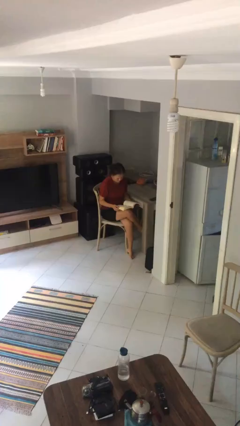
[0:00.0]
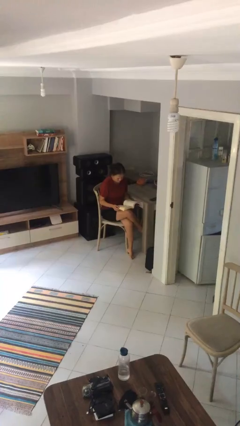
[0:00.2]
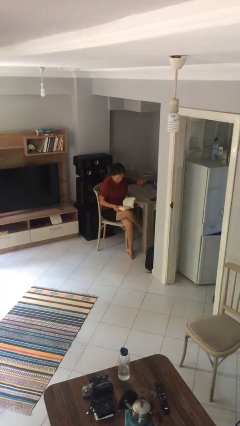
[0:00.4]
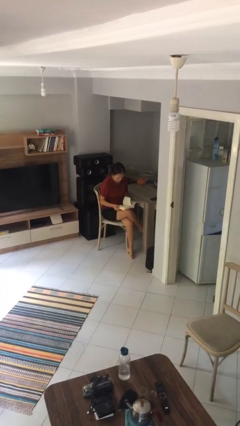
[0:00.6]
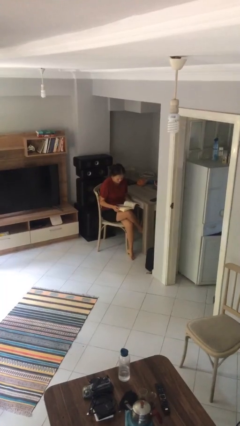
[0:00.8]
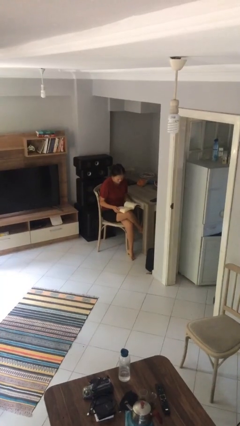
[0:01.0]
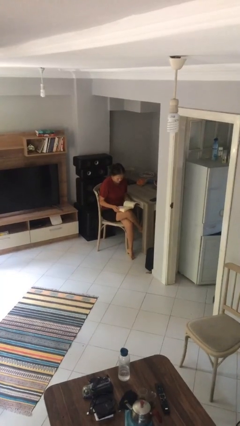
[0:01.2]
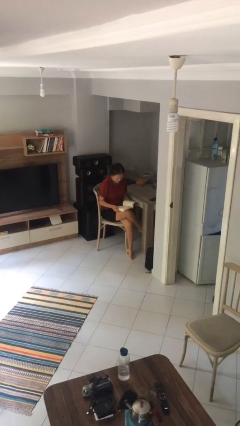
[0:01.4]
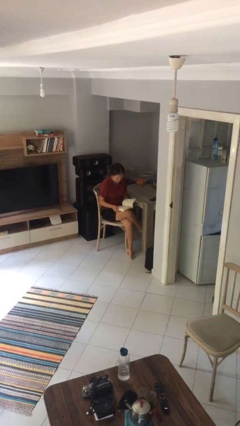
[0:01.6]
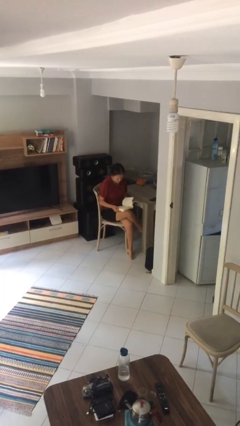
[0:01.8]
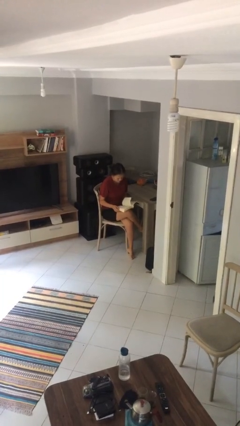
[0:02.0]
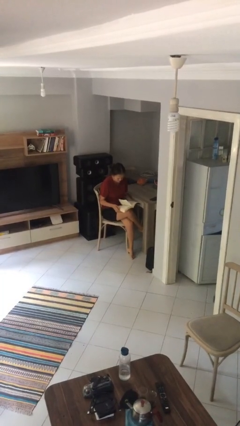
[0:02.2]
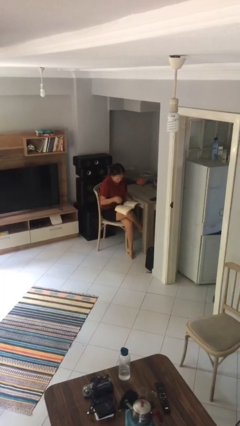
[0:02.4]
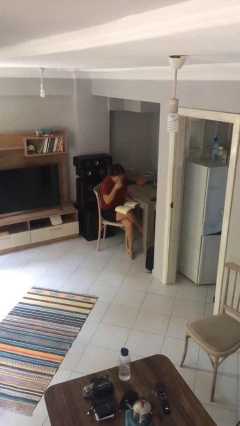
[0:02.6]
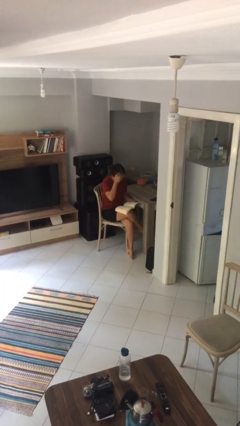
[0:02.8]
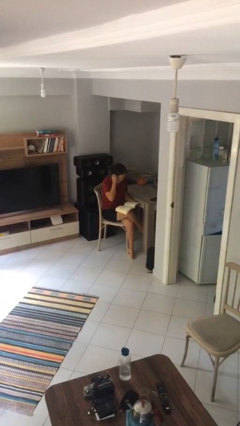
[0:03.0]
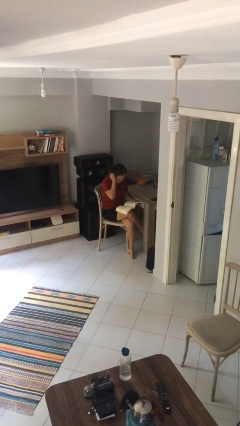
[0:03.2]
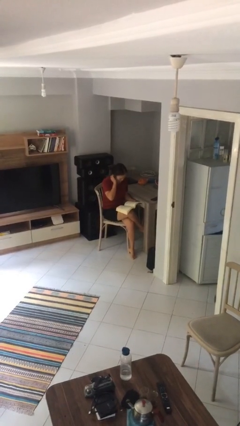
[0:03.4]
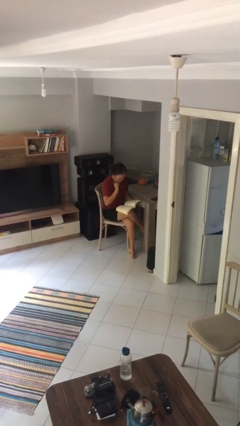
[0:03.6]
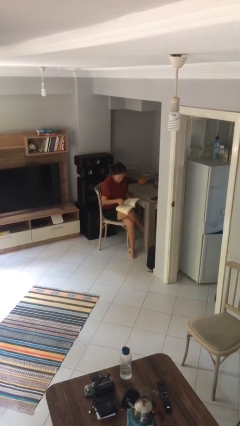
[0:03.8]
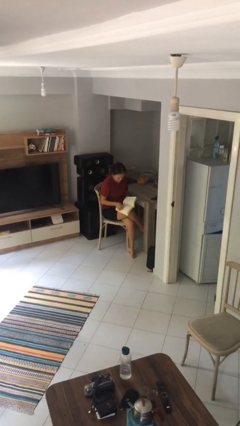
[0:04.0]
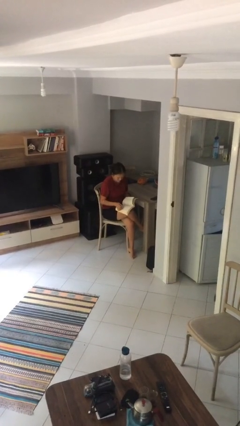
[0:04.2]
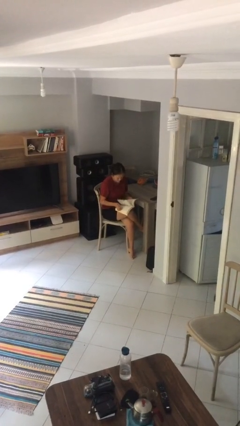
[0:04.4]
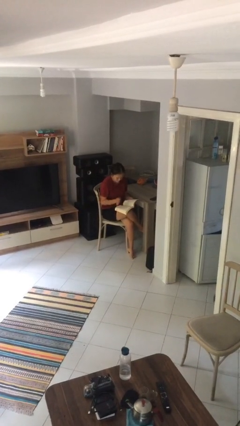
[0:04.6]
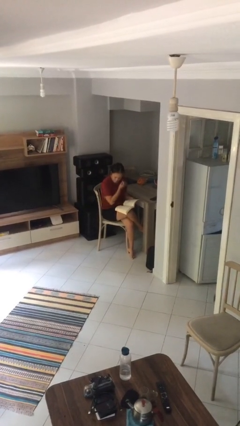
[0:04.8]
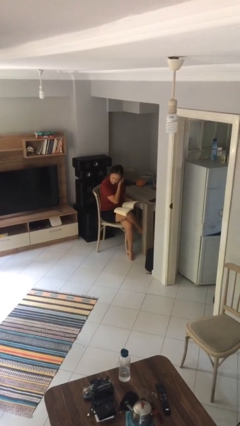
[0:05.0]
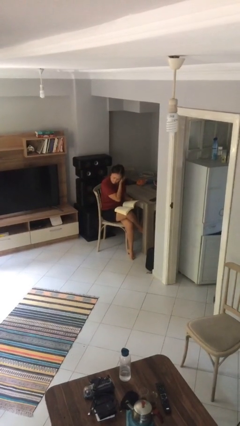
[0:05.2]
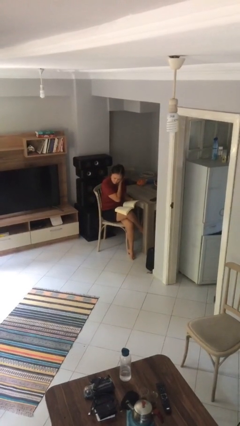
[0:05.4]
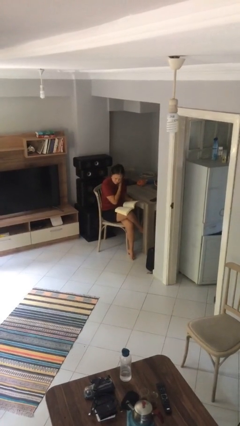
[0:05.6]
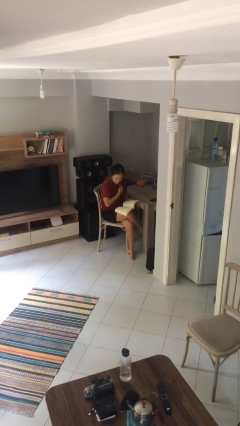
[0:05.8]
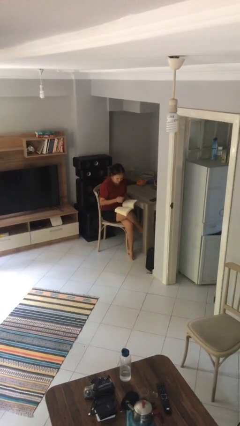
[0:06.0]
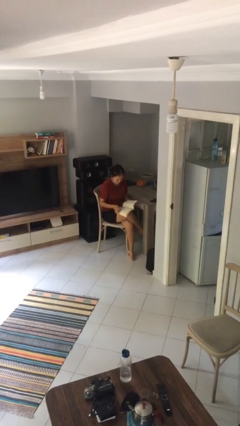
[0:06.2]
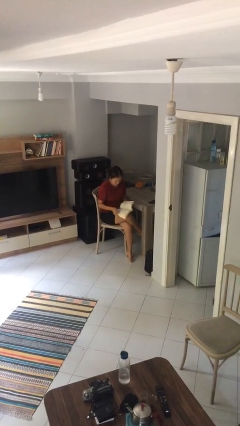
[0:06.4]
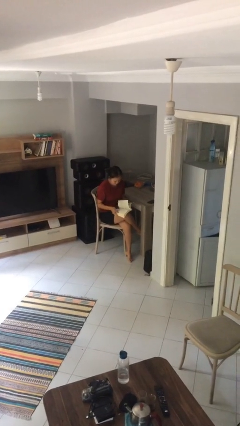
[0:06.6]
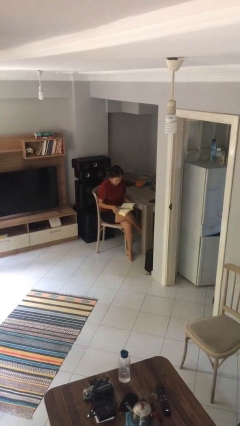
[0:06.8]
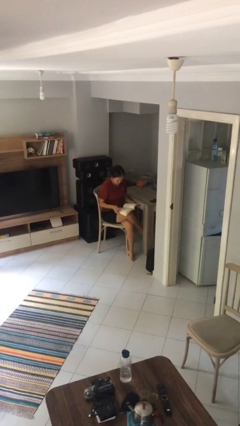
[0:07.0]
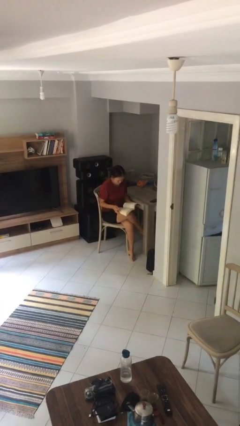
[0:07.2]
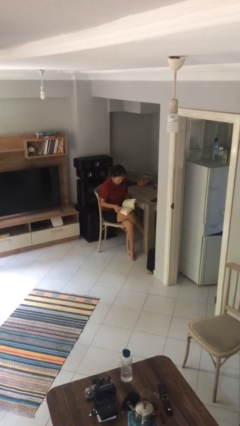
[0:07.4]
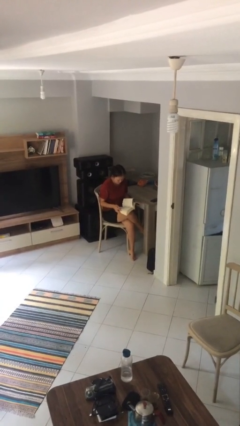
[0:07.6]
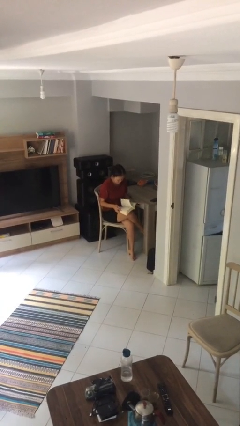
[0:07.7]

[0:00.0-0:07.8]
person reads document

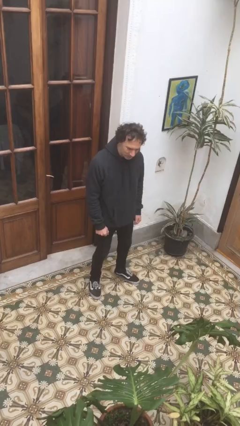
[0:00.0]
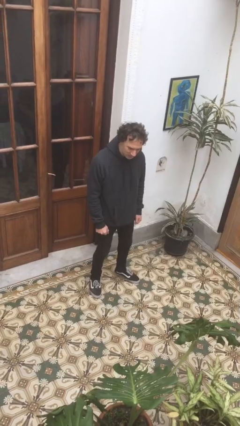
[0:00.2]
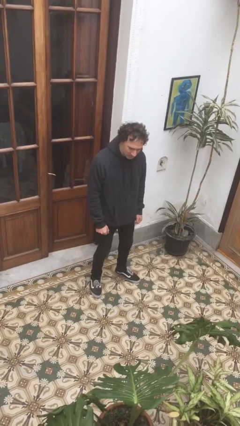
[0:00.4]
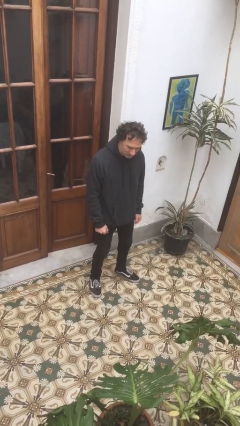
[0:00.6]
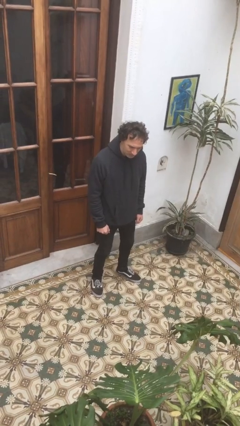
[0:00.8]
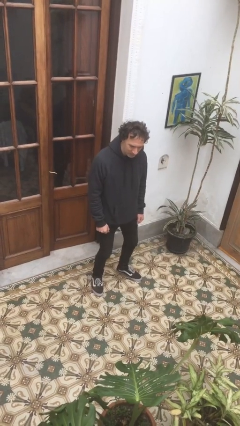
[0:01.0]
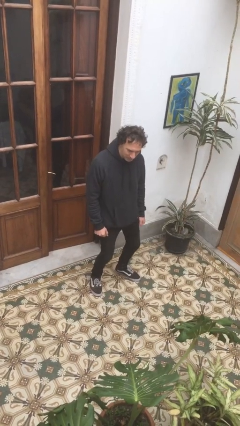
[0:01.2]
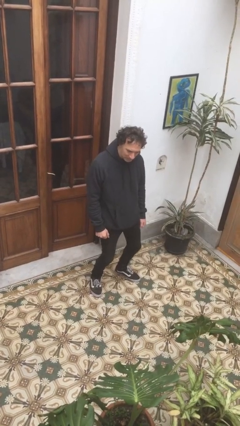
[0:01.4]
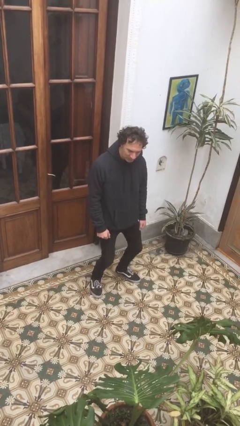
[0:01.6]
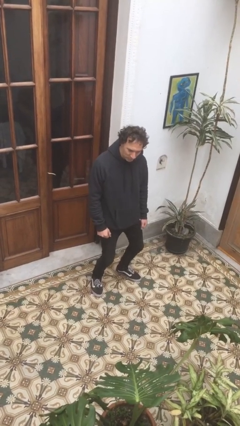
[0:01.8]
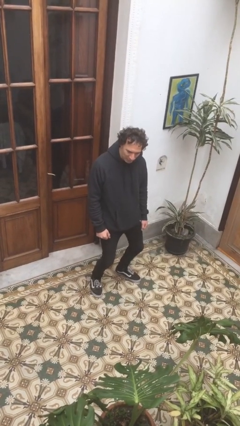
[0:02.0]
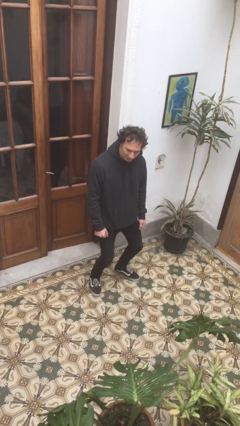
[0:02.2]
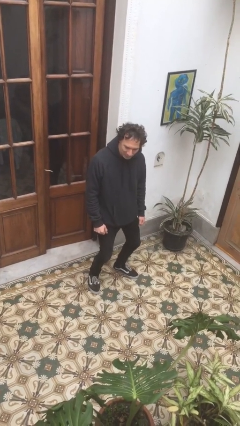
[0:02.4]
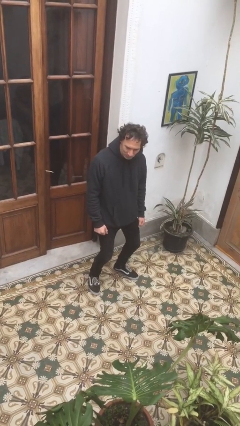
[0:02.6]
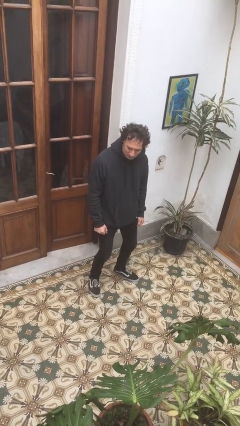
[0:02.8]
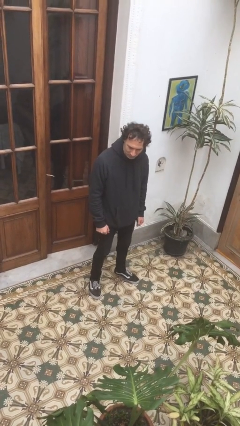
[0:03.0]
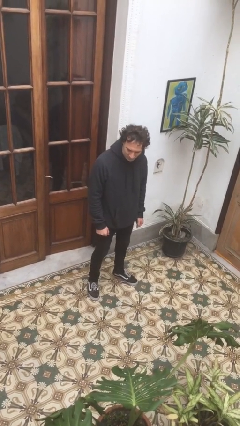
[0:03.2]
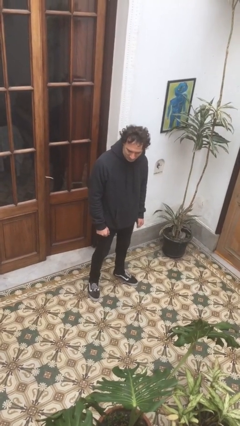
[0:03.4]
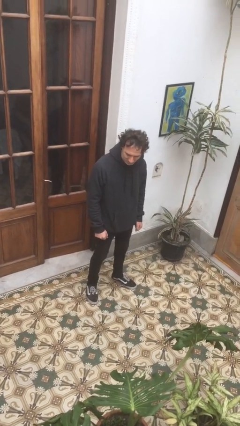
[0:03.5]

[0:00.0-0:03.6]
person wiggles hips

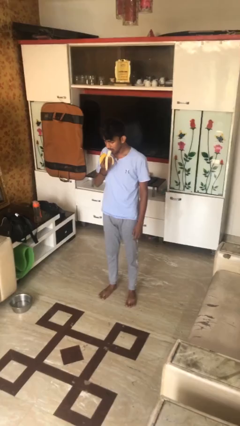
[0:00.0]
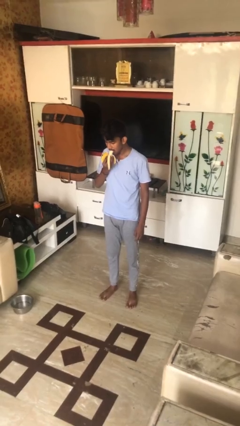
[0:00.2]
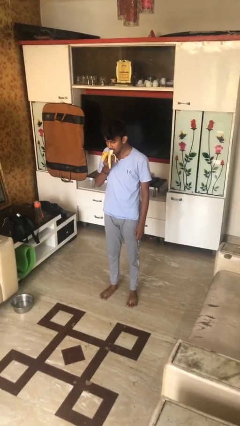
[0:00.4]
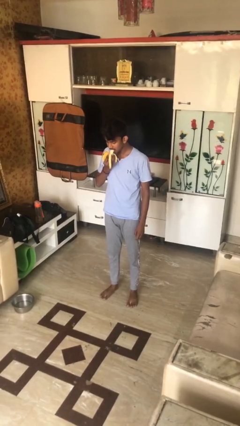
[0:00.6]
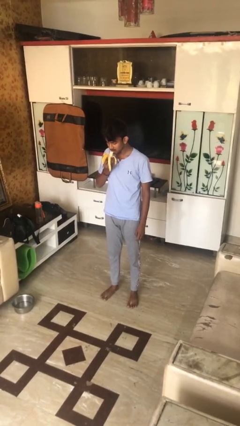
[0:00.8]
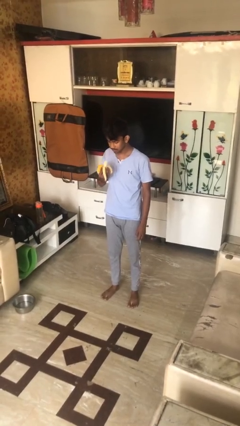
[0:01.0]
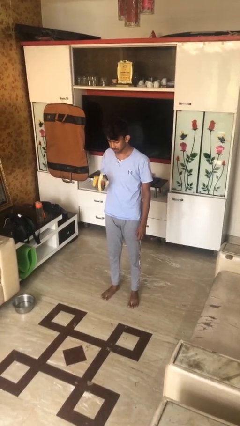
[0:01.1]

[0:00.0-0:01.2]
person eats banana

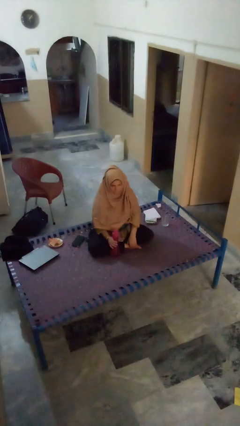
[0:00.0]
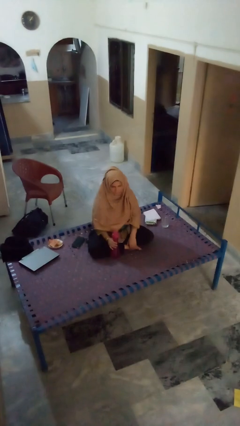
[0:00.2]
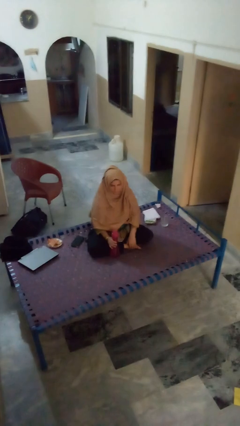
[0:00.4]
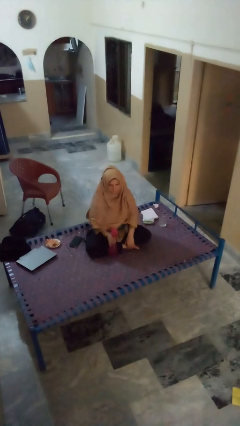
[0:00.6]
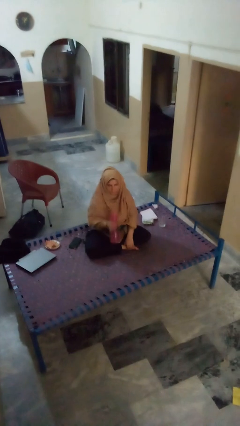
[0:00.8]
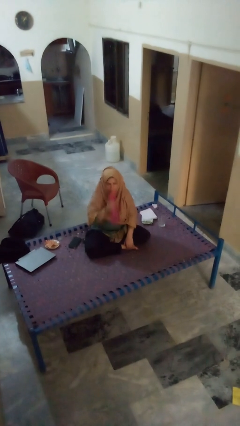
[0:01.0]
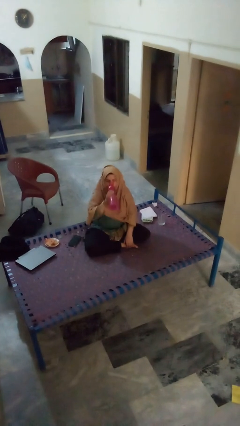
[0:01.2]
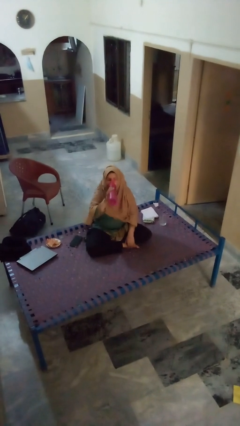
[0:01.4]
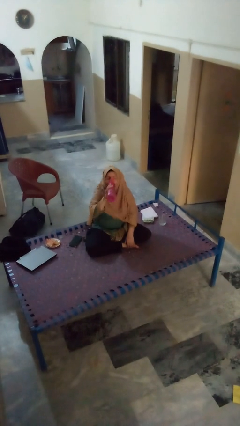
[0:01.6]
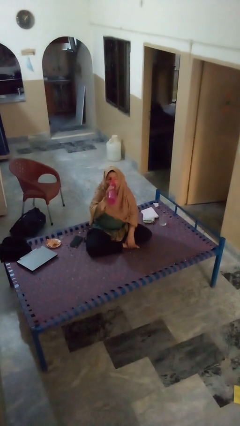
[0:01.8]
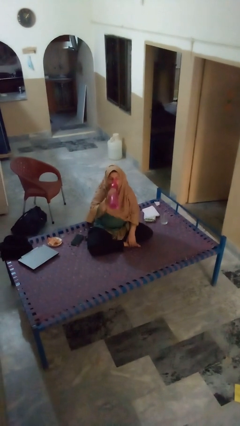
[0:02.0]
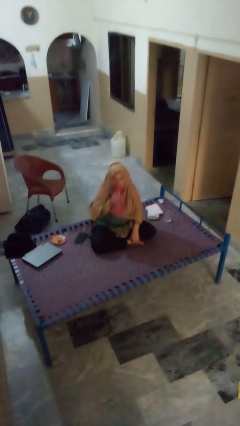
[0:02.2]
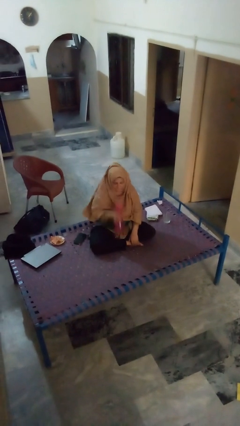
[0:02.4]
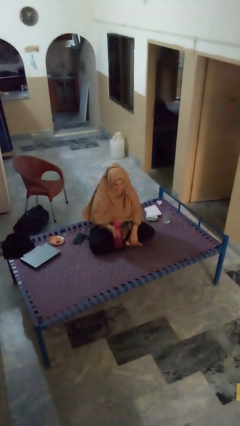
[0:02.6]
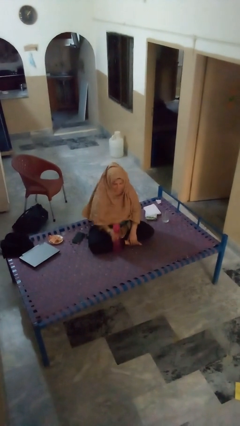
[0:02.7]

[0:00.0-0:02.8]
person drinks from bottle

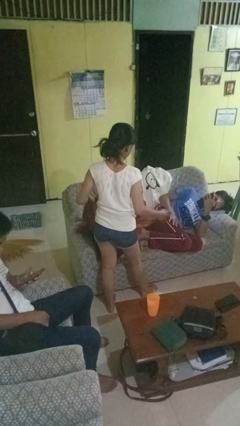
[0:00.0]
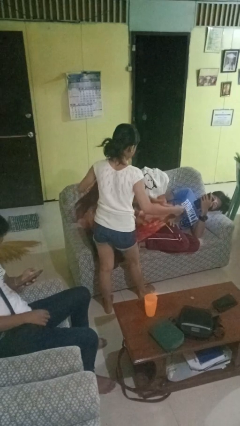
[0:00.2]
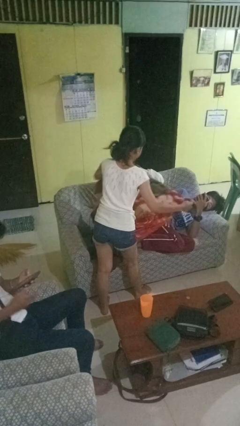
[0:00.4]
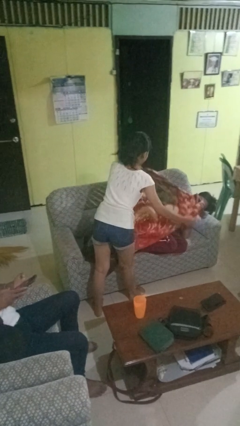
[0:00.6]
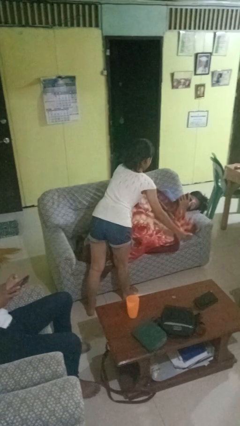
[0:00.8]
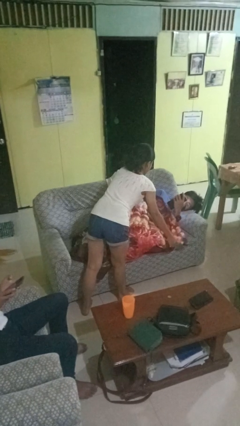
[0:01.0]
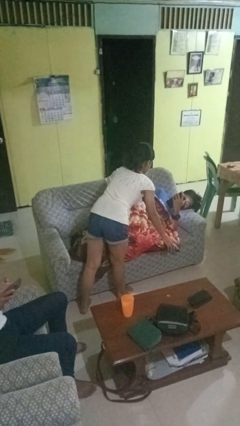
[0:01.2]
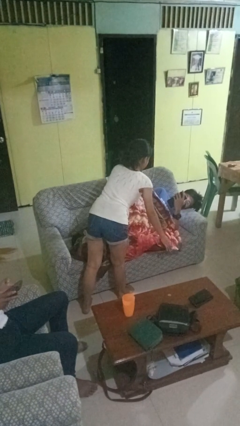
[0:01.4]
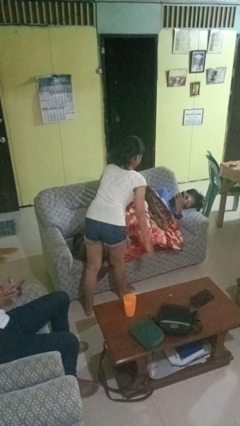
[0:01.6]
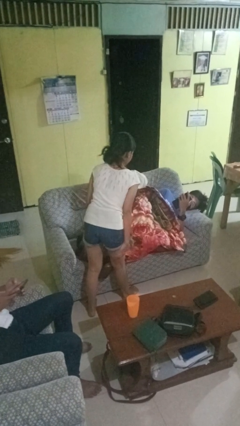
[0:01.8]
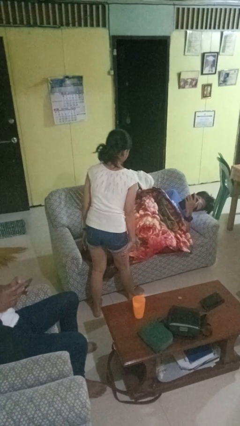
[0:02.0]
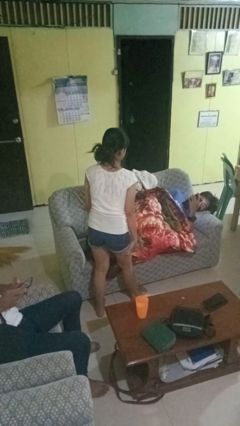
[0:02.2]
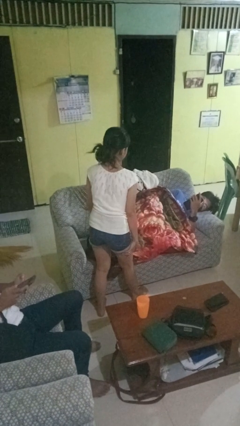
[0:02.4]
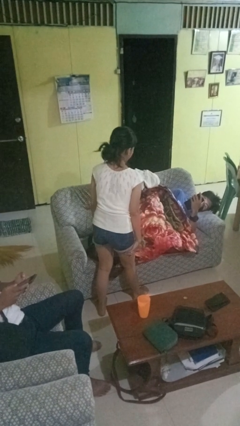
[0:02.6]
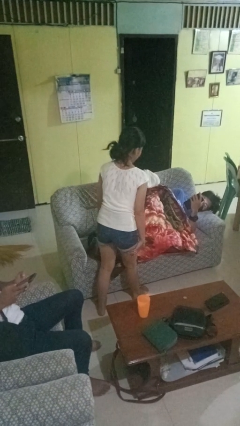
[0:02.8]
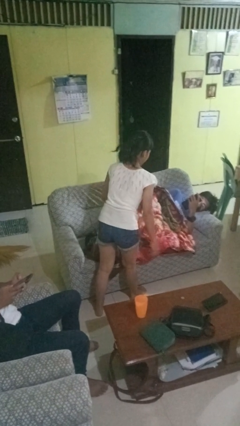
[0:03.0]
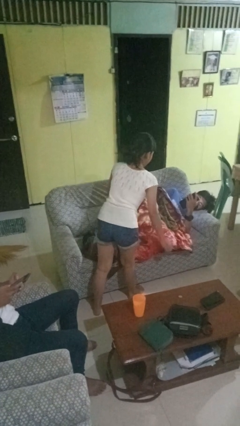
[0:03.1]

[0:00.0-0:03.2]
person covers friend with blanket
